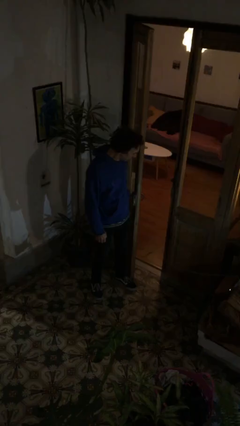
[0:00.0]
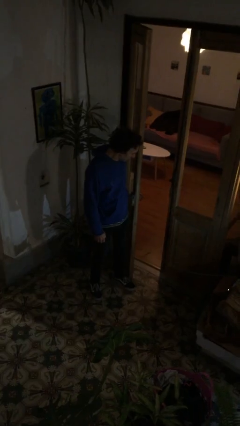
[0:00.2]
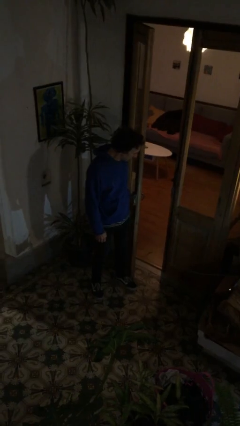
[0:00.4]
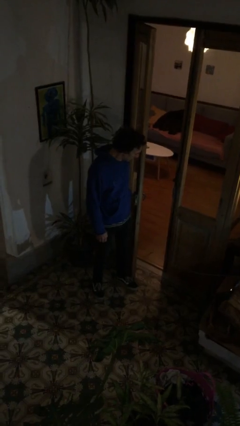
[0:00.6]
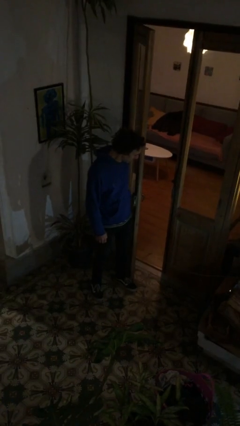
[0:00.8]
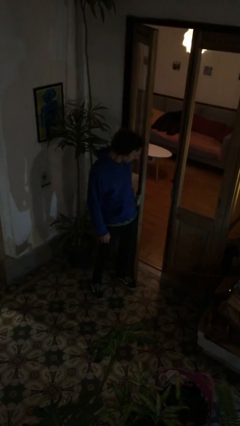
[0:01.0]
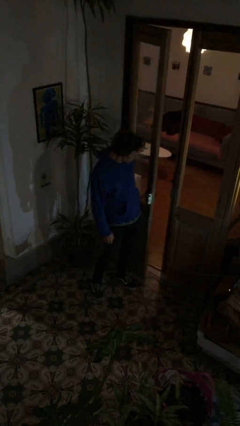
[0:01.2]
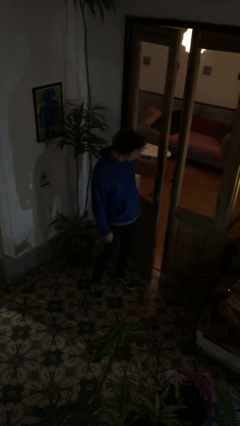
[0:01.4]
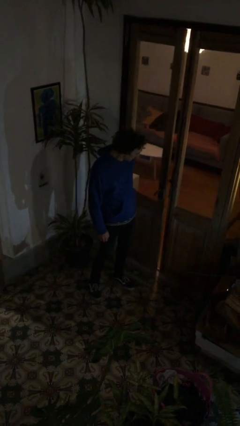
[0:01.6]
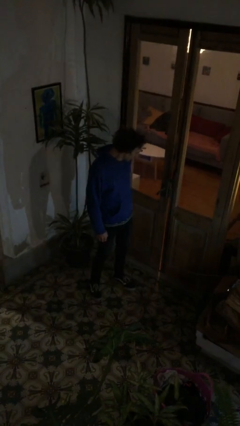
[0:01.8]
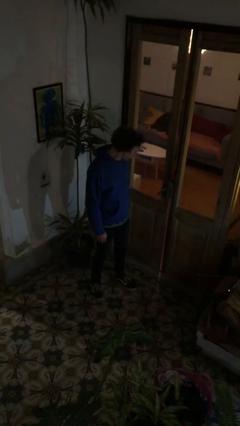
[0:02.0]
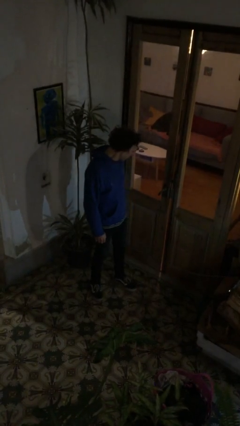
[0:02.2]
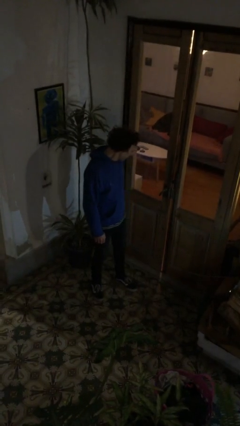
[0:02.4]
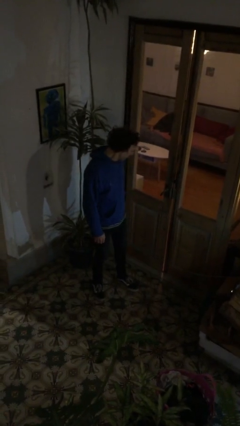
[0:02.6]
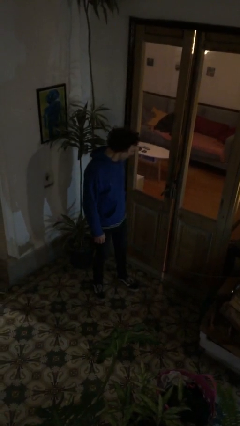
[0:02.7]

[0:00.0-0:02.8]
person closes door with hip

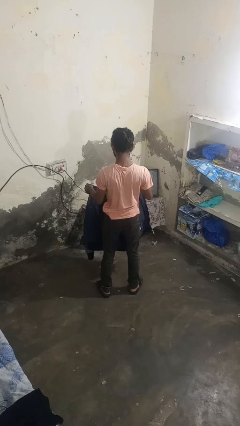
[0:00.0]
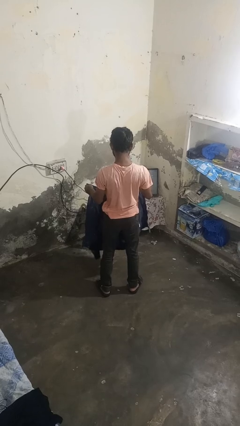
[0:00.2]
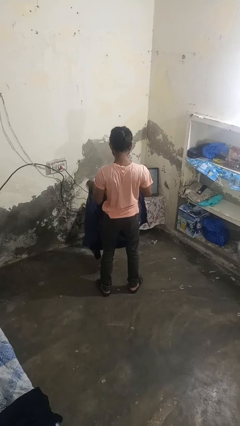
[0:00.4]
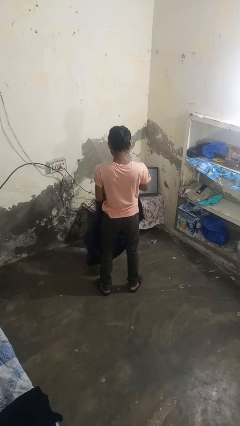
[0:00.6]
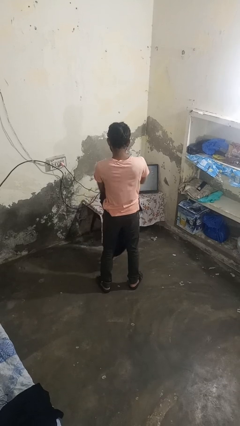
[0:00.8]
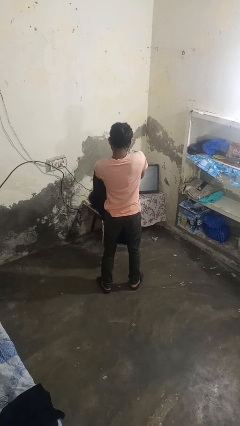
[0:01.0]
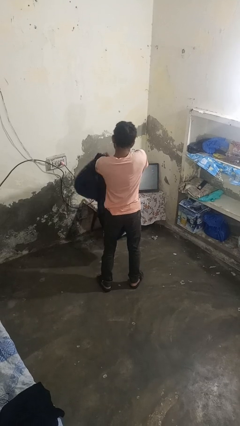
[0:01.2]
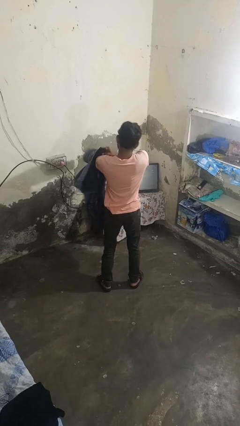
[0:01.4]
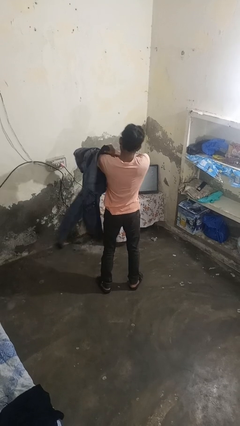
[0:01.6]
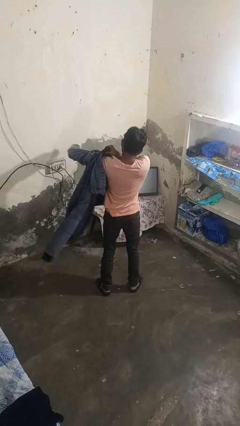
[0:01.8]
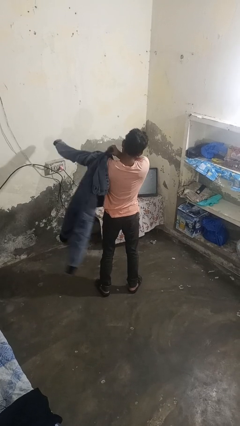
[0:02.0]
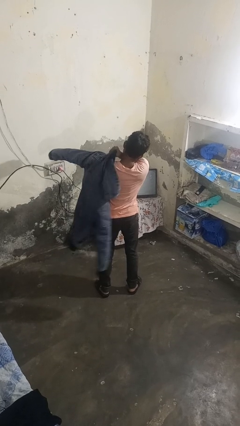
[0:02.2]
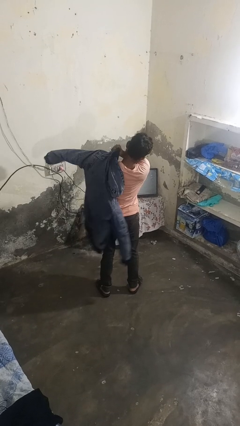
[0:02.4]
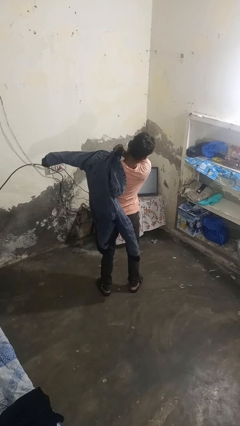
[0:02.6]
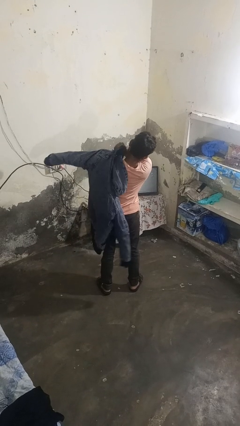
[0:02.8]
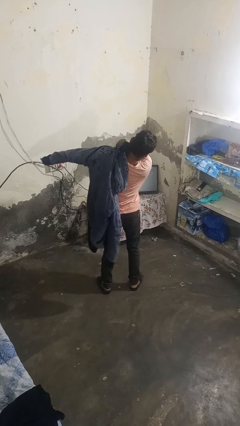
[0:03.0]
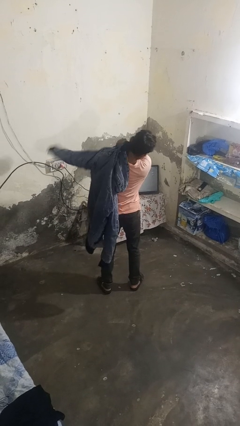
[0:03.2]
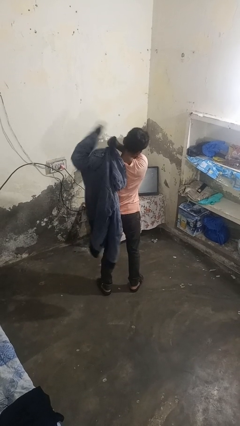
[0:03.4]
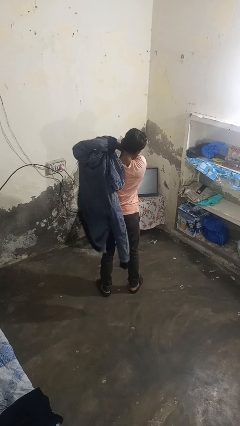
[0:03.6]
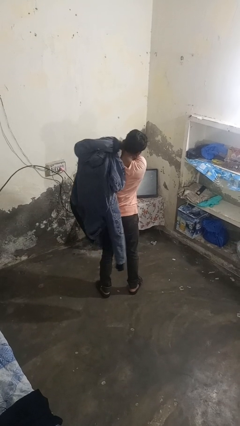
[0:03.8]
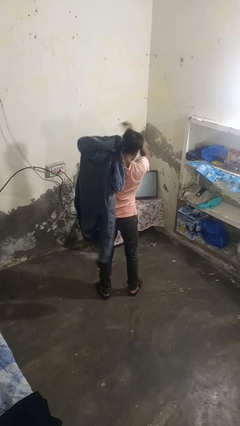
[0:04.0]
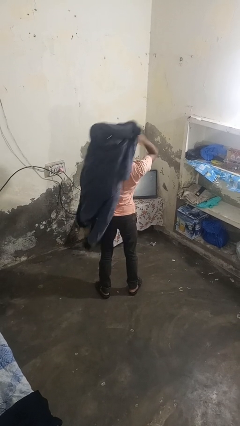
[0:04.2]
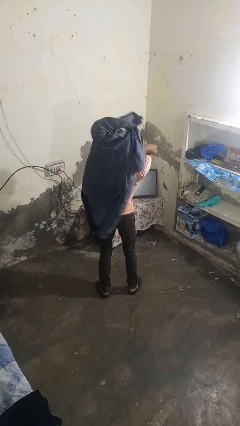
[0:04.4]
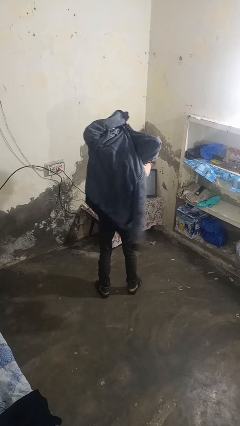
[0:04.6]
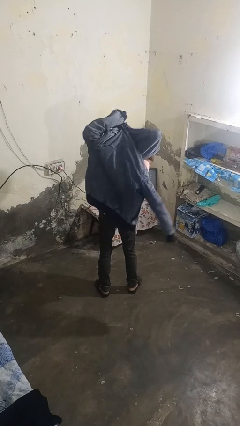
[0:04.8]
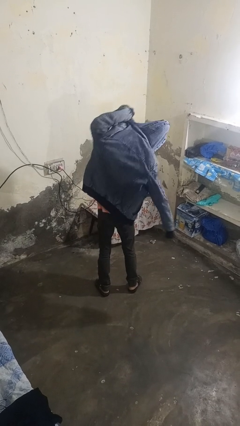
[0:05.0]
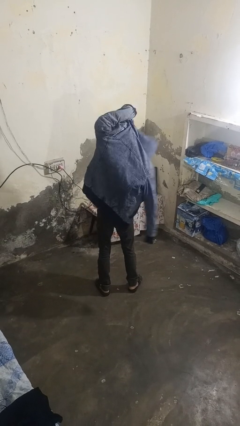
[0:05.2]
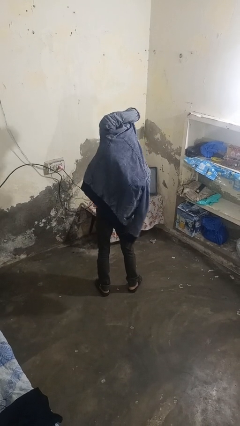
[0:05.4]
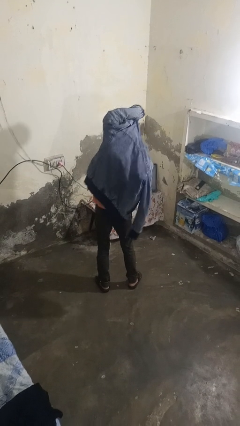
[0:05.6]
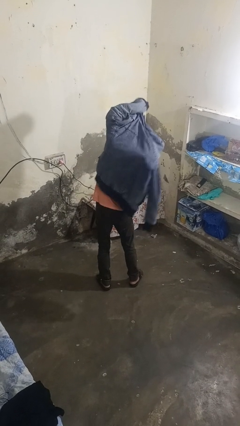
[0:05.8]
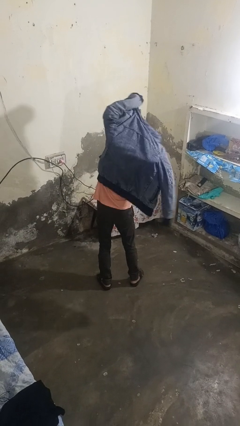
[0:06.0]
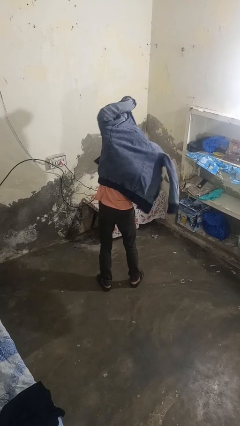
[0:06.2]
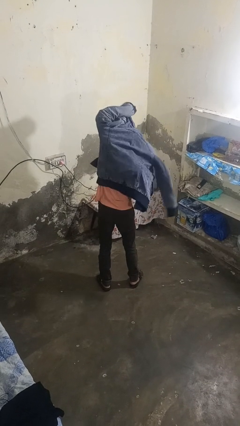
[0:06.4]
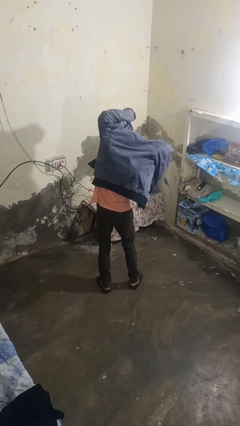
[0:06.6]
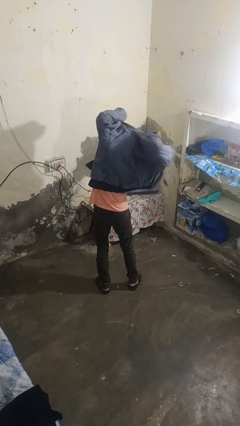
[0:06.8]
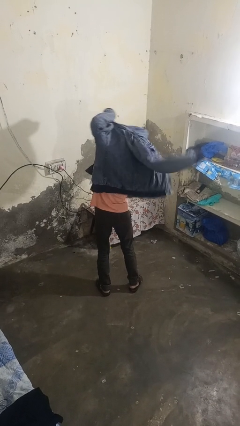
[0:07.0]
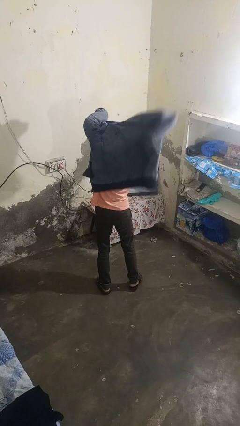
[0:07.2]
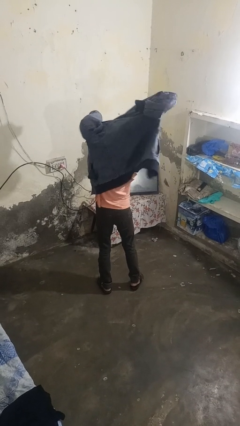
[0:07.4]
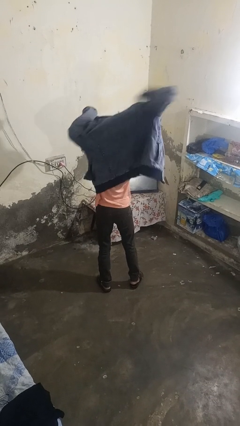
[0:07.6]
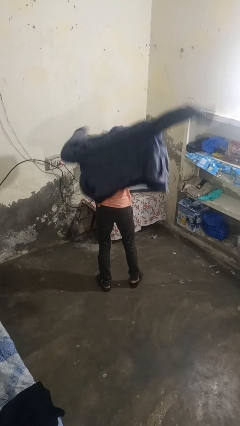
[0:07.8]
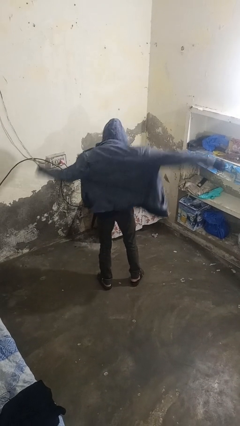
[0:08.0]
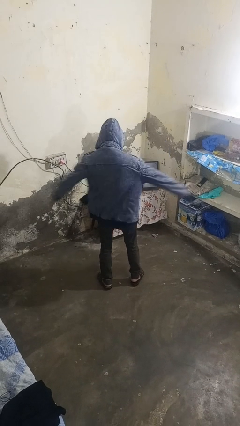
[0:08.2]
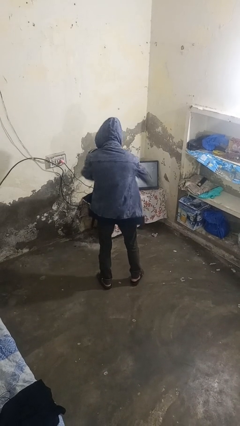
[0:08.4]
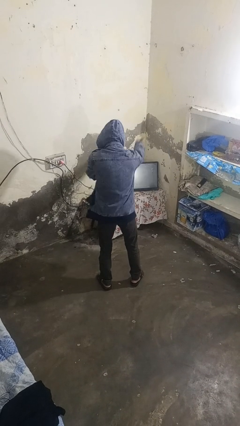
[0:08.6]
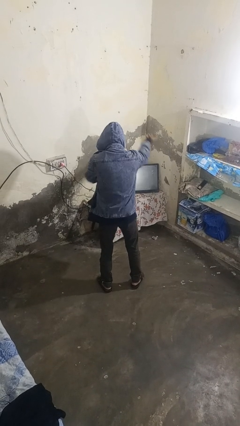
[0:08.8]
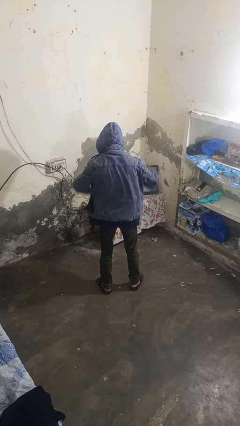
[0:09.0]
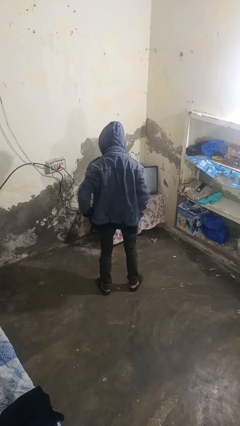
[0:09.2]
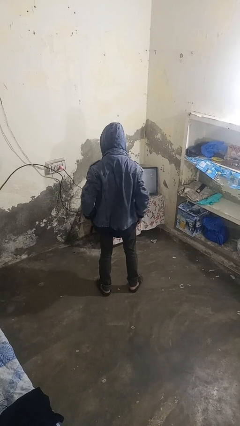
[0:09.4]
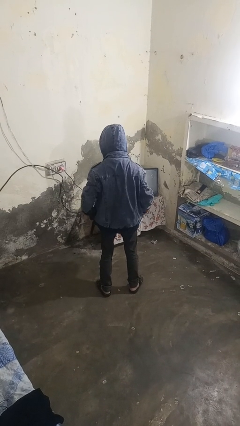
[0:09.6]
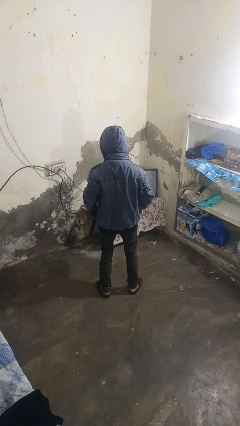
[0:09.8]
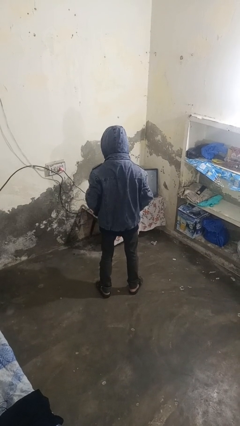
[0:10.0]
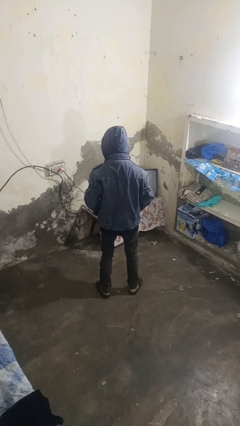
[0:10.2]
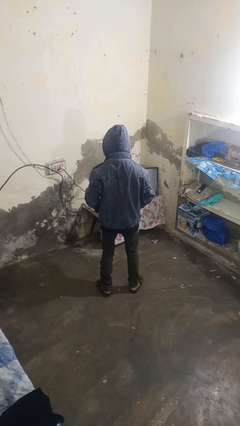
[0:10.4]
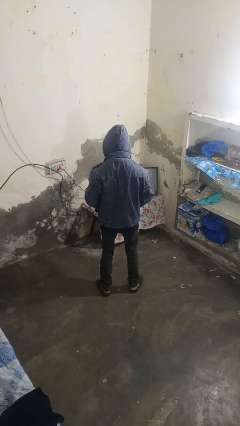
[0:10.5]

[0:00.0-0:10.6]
person puts on jacket

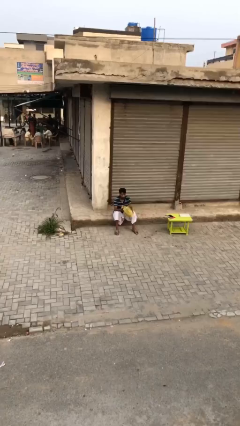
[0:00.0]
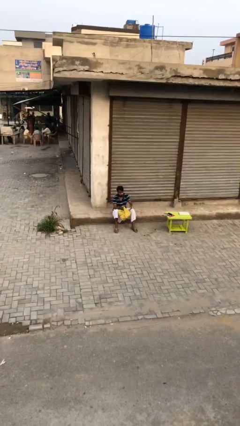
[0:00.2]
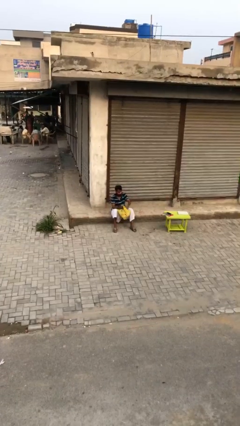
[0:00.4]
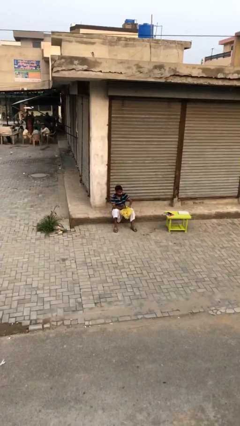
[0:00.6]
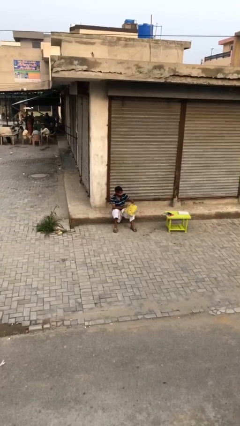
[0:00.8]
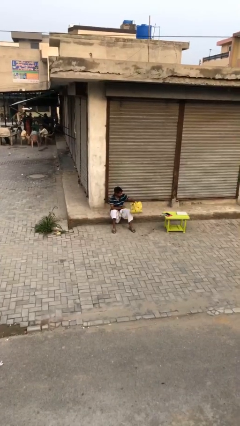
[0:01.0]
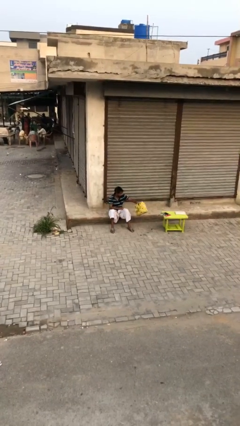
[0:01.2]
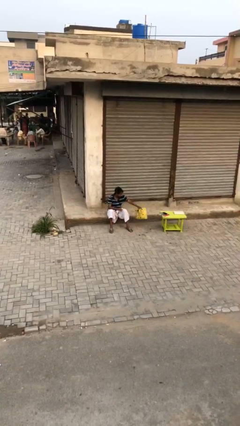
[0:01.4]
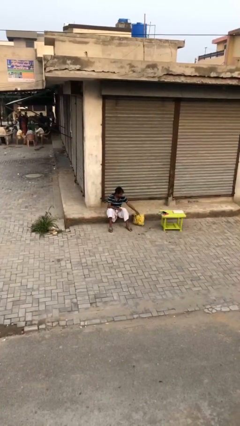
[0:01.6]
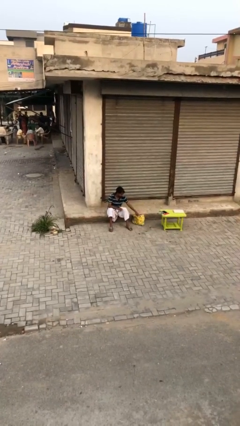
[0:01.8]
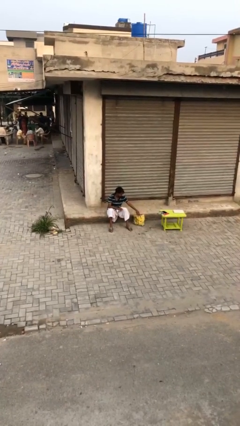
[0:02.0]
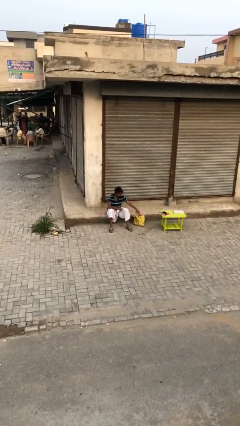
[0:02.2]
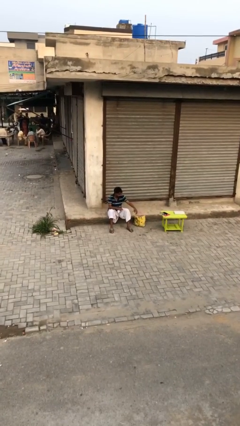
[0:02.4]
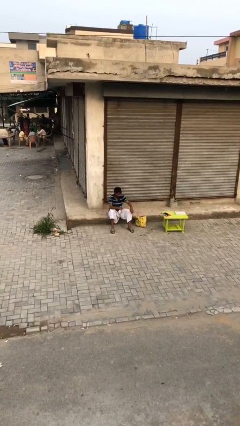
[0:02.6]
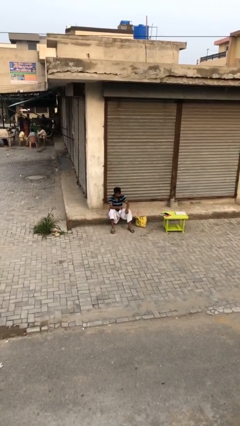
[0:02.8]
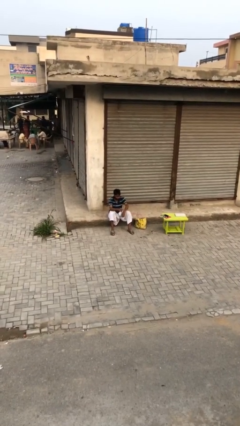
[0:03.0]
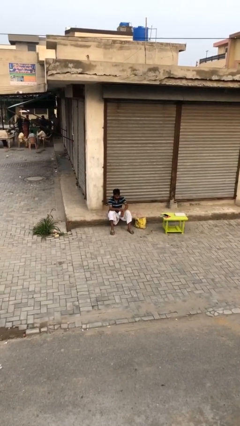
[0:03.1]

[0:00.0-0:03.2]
person puts down object on floor

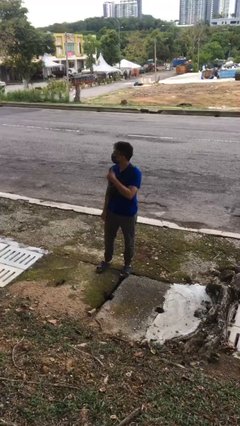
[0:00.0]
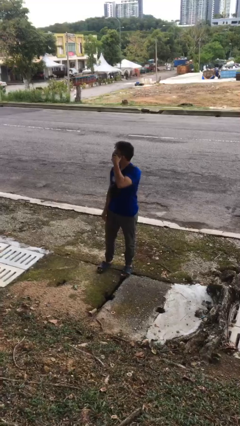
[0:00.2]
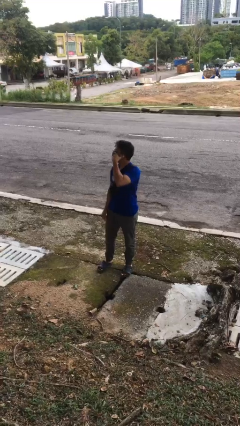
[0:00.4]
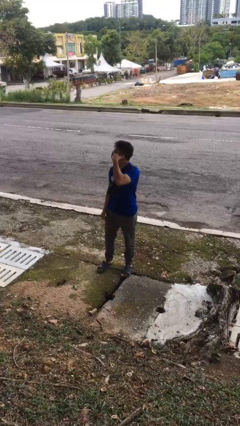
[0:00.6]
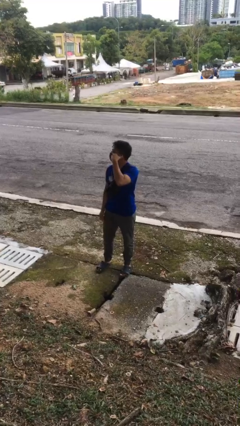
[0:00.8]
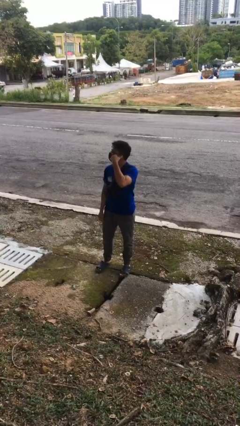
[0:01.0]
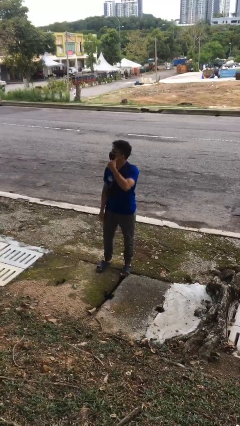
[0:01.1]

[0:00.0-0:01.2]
person gestures call me
